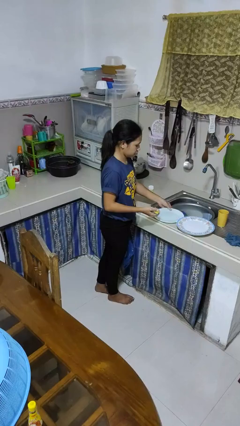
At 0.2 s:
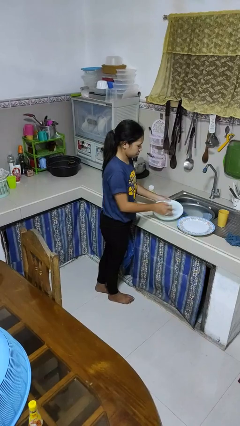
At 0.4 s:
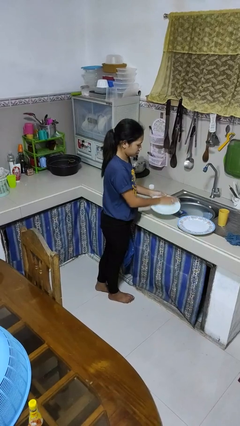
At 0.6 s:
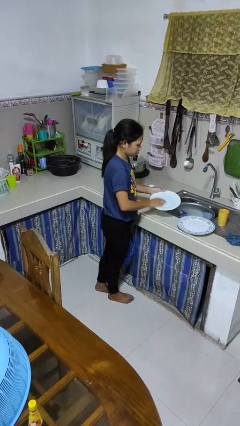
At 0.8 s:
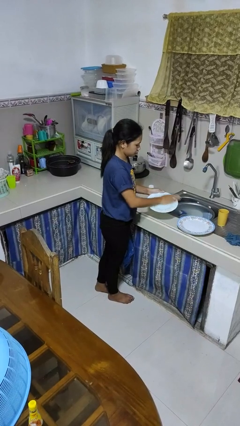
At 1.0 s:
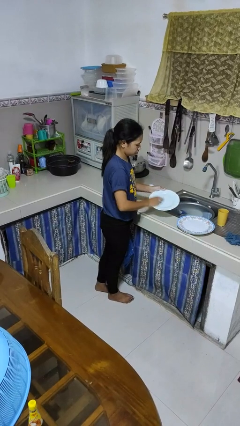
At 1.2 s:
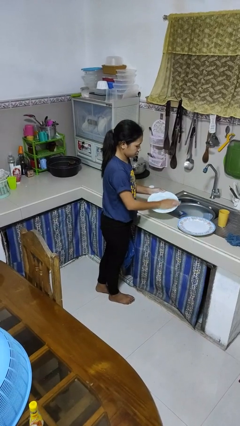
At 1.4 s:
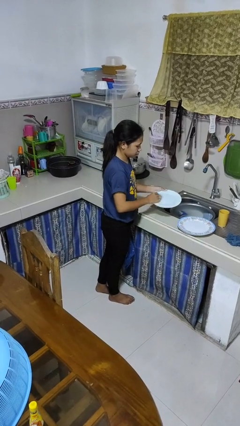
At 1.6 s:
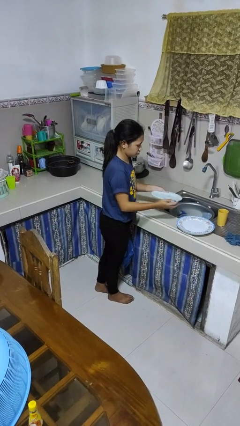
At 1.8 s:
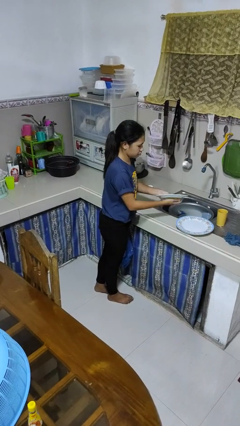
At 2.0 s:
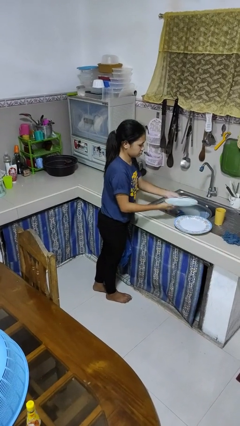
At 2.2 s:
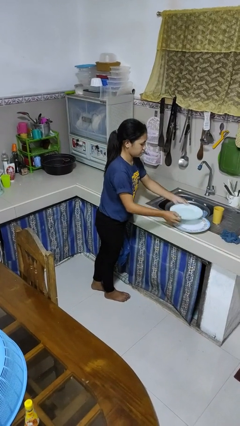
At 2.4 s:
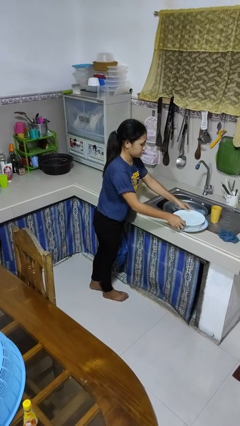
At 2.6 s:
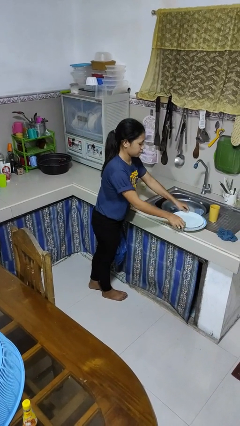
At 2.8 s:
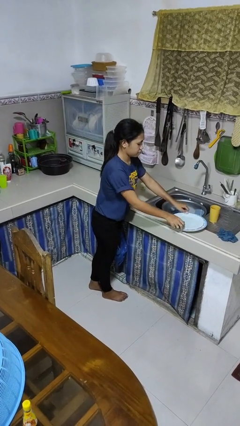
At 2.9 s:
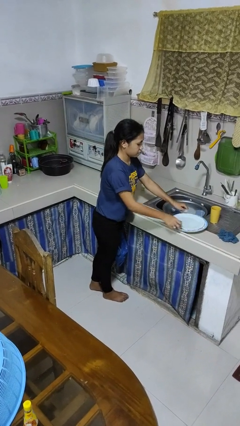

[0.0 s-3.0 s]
person washes dish

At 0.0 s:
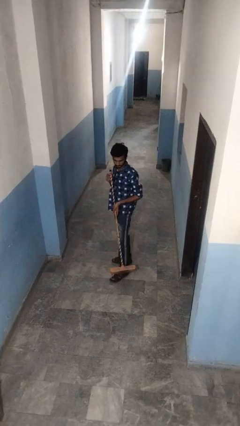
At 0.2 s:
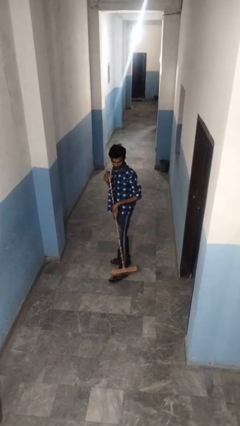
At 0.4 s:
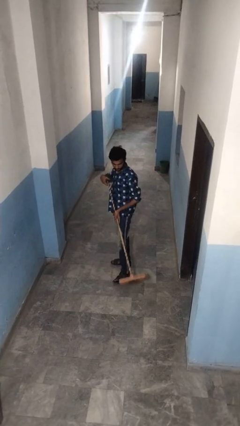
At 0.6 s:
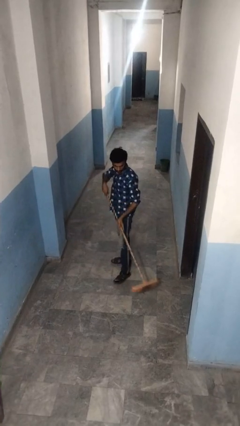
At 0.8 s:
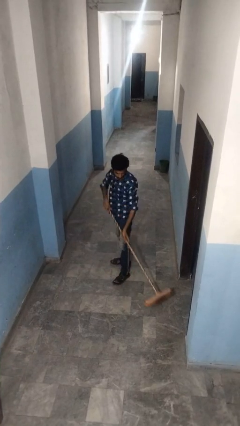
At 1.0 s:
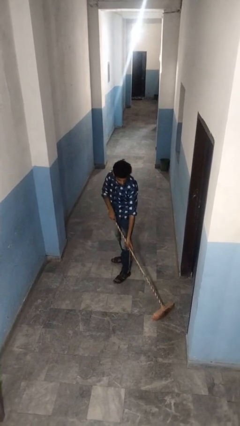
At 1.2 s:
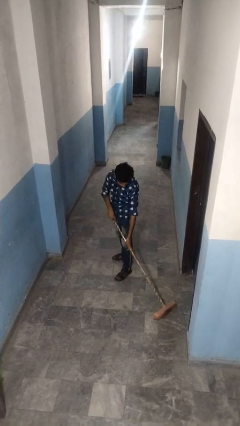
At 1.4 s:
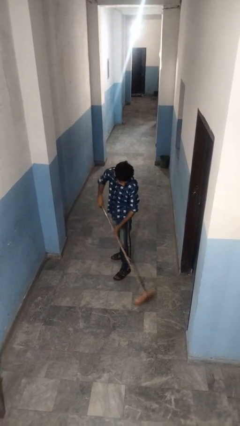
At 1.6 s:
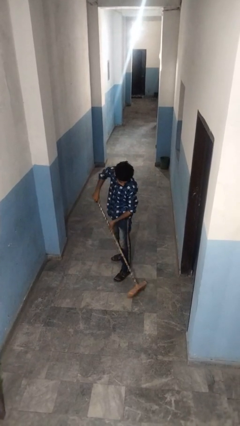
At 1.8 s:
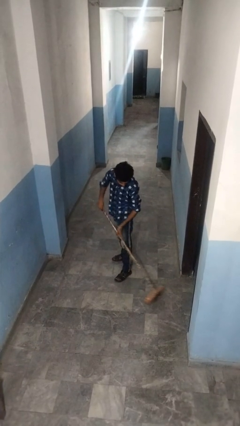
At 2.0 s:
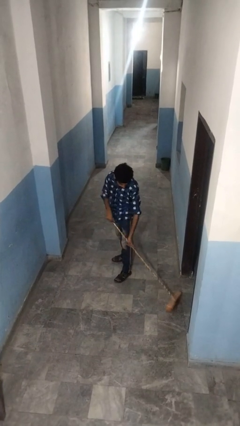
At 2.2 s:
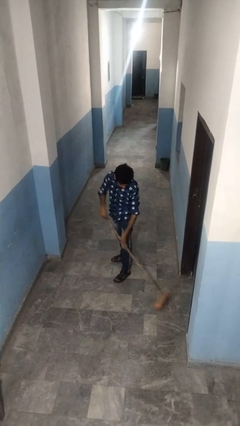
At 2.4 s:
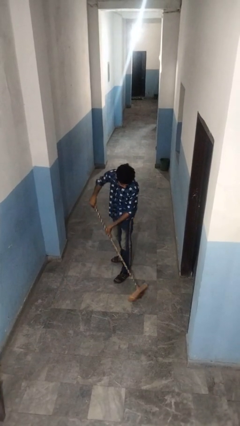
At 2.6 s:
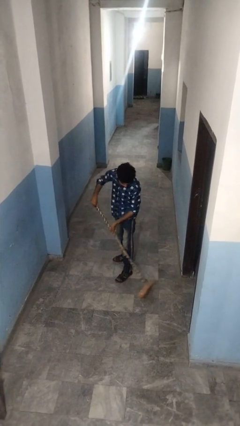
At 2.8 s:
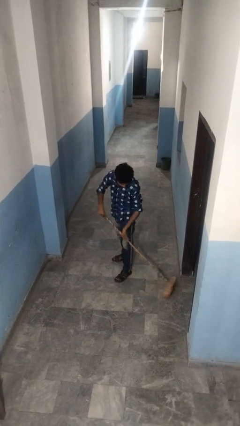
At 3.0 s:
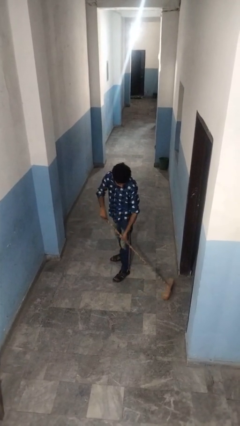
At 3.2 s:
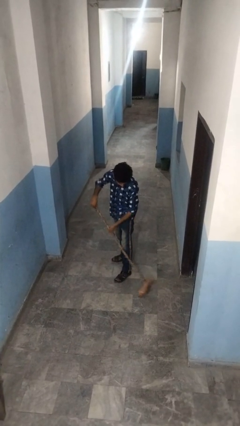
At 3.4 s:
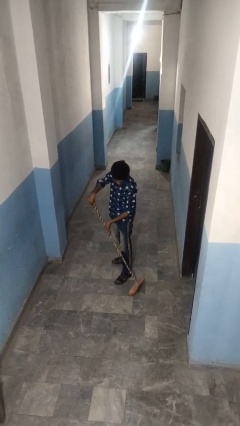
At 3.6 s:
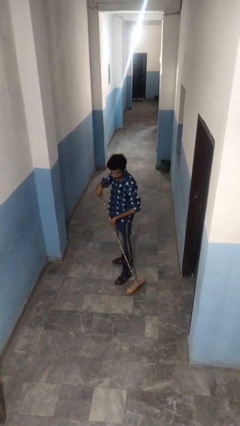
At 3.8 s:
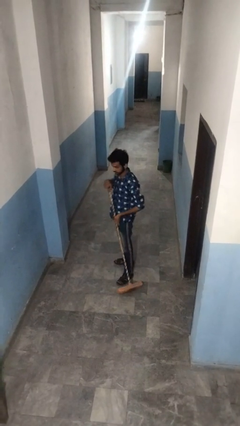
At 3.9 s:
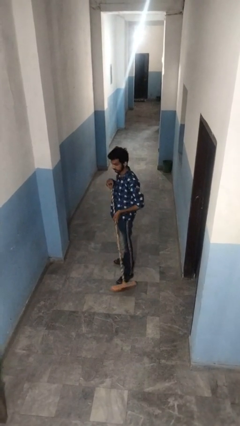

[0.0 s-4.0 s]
person sweeps floor

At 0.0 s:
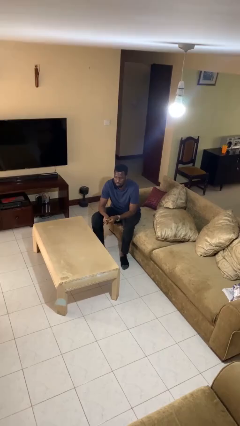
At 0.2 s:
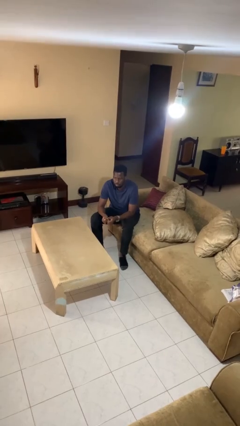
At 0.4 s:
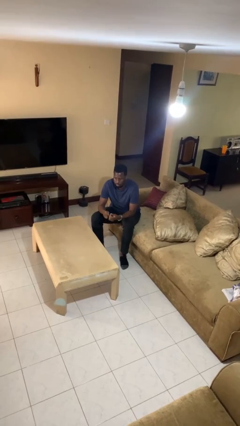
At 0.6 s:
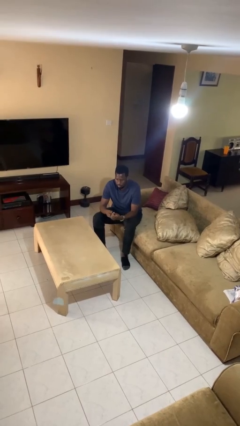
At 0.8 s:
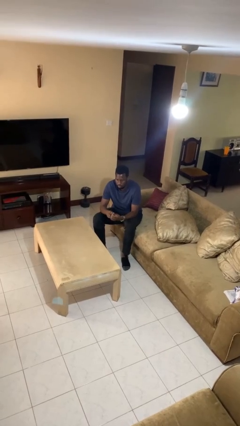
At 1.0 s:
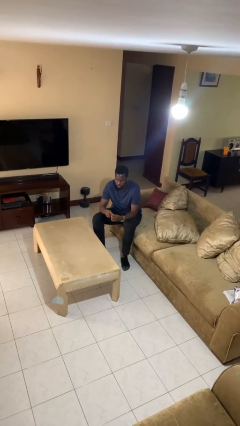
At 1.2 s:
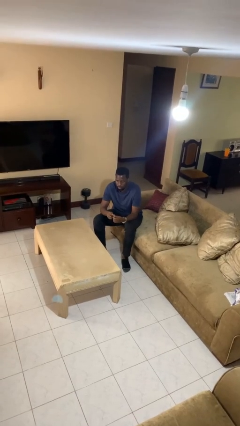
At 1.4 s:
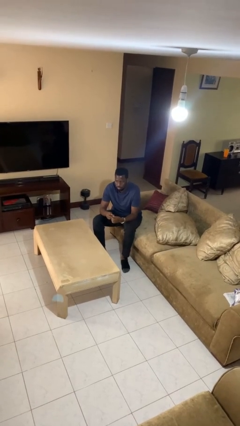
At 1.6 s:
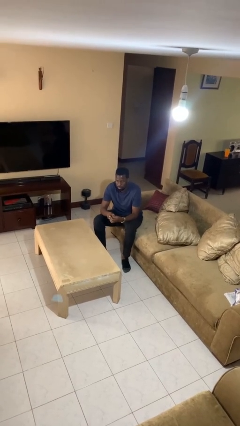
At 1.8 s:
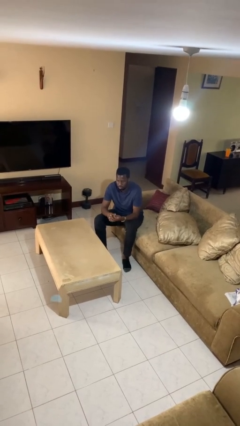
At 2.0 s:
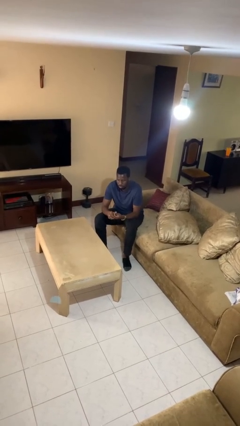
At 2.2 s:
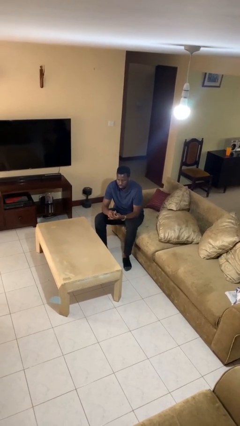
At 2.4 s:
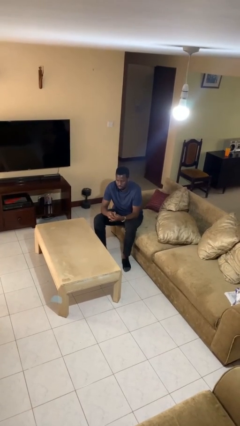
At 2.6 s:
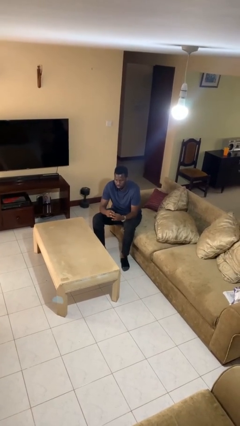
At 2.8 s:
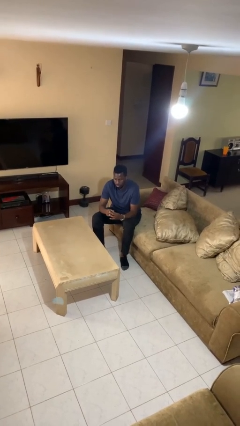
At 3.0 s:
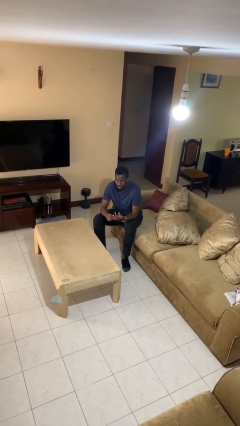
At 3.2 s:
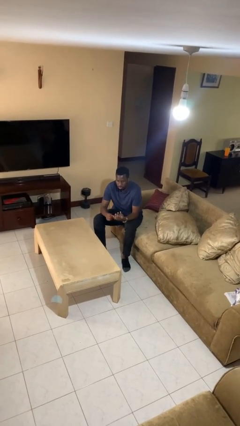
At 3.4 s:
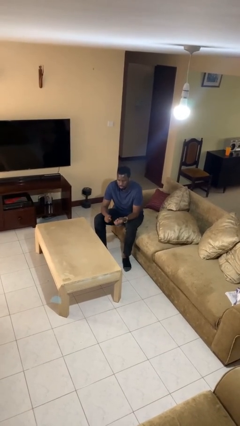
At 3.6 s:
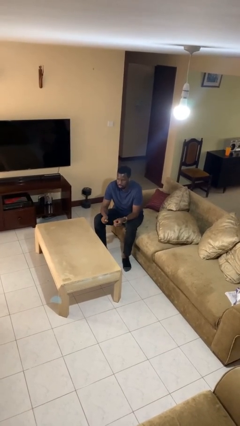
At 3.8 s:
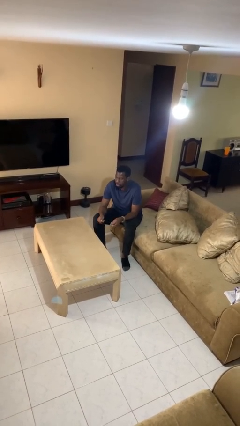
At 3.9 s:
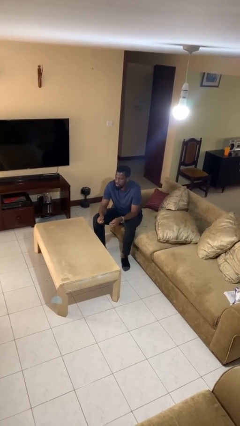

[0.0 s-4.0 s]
person files fingernails

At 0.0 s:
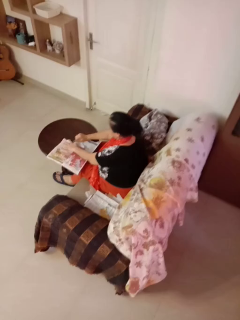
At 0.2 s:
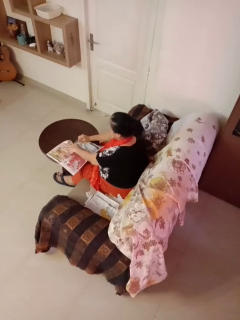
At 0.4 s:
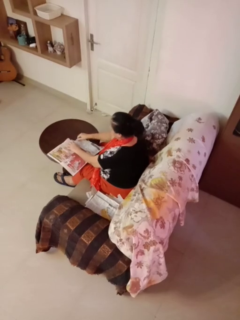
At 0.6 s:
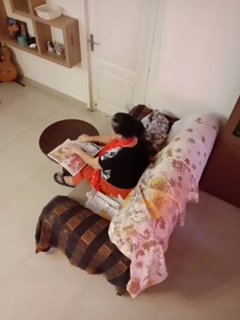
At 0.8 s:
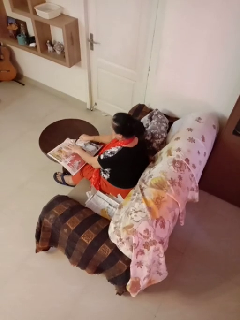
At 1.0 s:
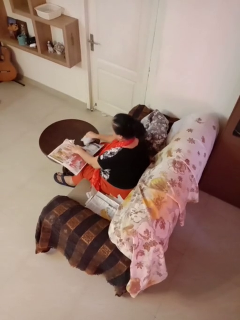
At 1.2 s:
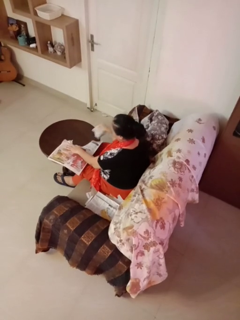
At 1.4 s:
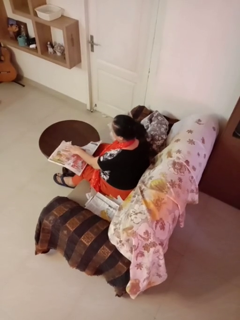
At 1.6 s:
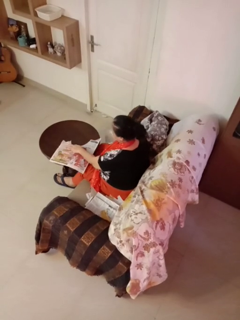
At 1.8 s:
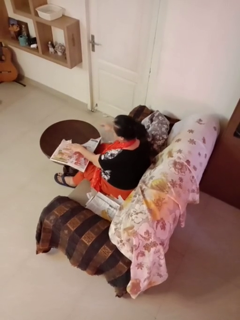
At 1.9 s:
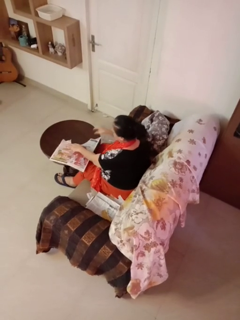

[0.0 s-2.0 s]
person tears paper

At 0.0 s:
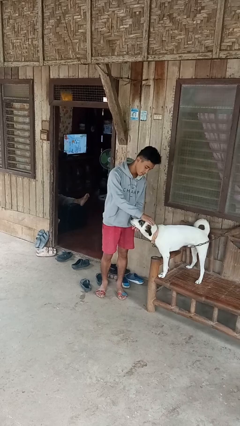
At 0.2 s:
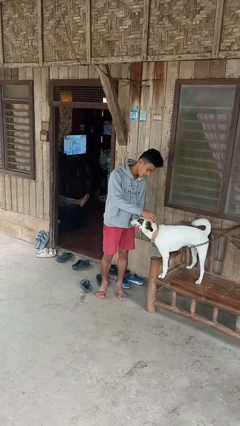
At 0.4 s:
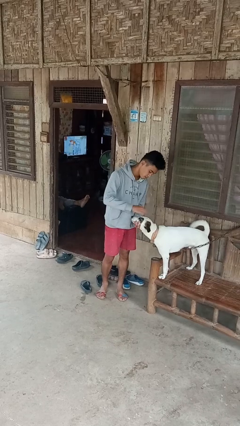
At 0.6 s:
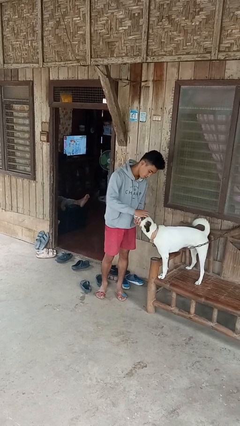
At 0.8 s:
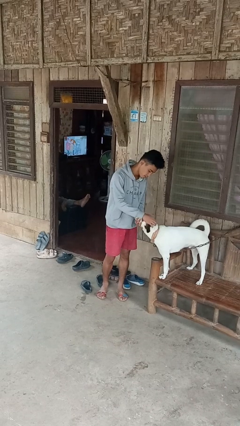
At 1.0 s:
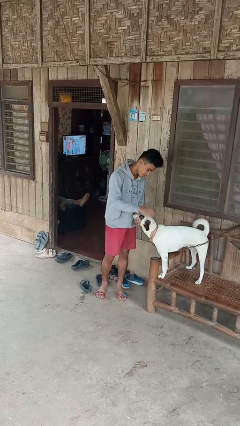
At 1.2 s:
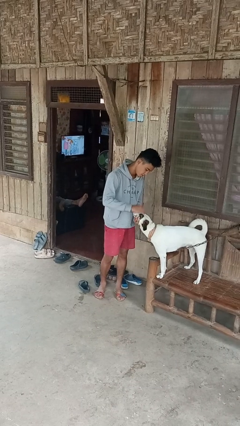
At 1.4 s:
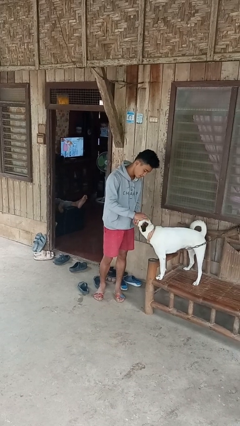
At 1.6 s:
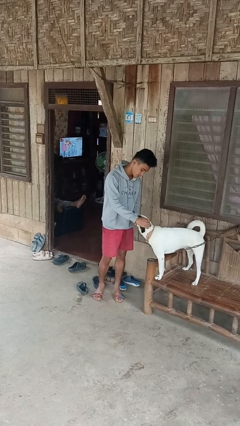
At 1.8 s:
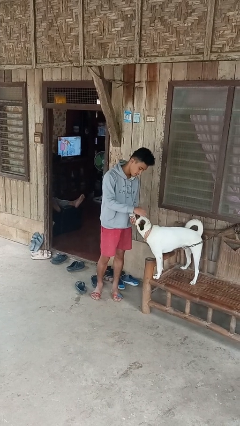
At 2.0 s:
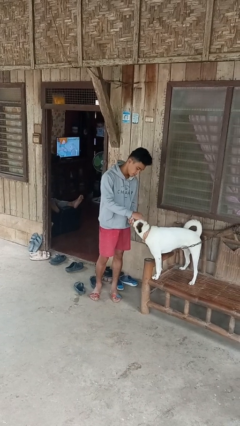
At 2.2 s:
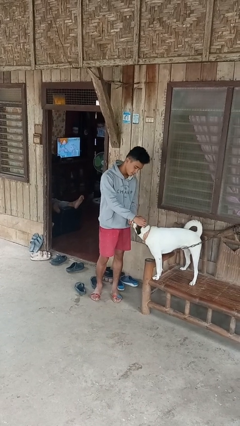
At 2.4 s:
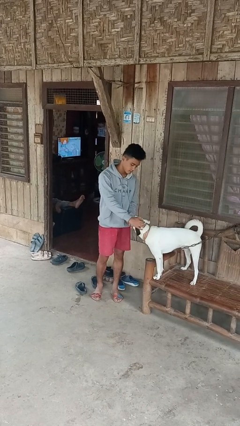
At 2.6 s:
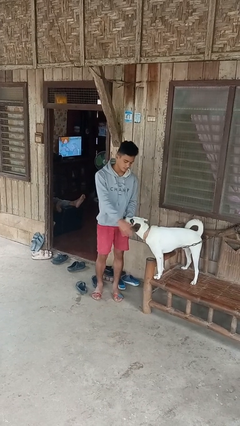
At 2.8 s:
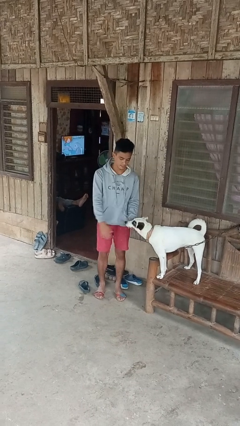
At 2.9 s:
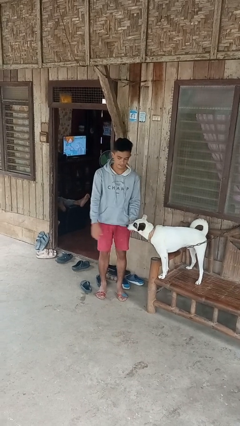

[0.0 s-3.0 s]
person pets dog

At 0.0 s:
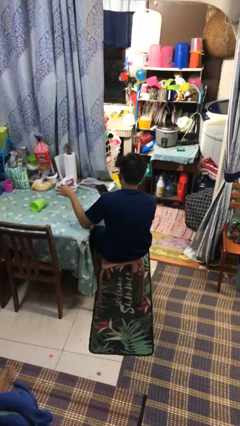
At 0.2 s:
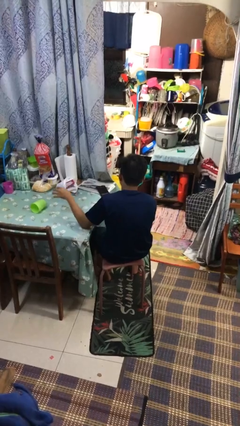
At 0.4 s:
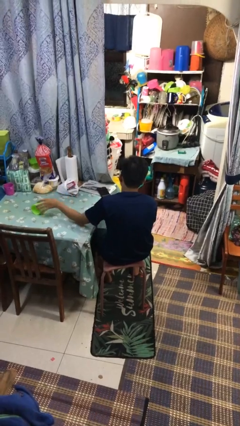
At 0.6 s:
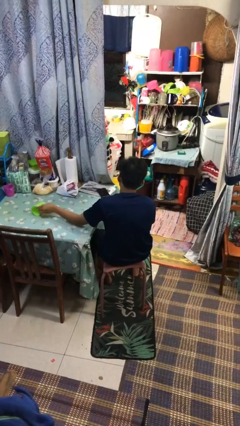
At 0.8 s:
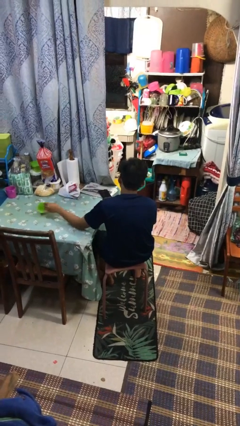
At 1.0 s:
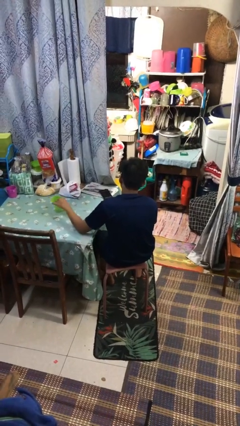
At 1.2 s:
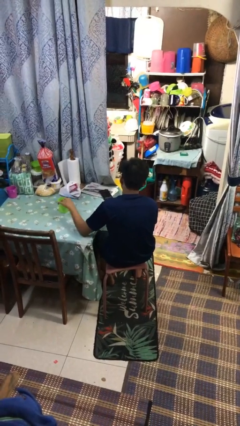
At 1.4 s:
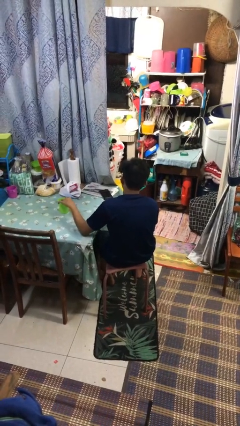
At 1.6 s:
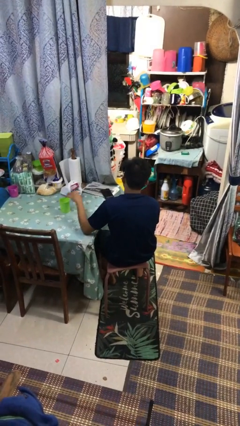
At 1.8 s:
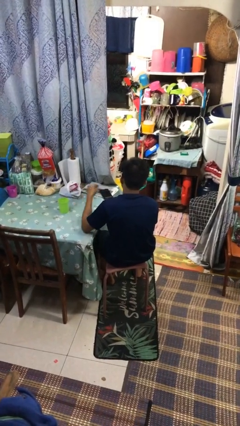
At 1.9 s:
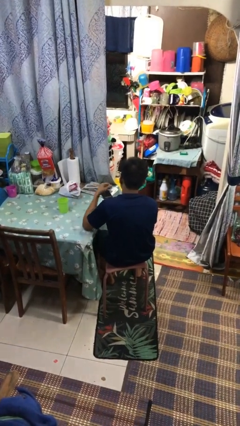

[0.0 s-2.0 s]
person sets upright glass
